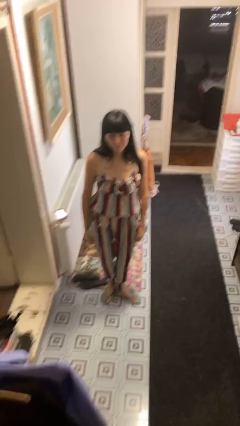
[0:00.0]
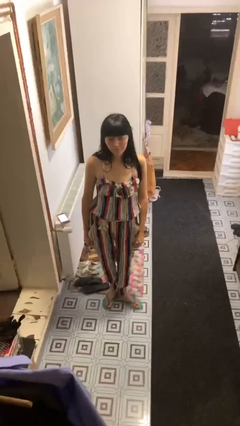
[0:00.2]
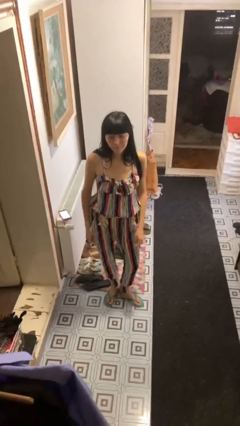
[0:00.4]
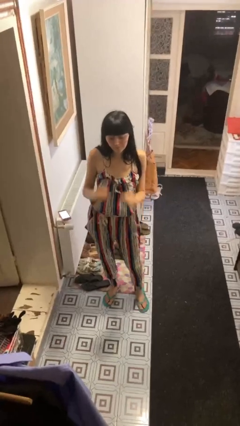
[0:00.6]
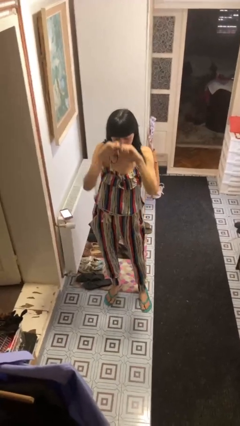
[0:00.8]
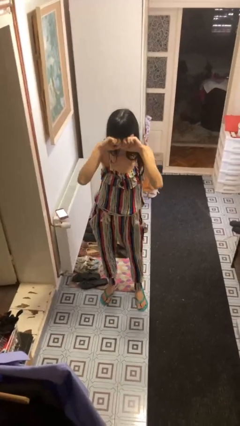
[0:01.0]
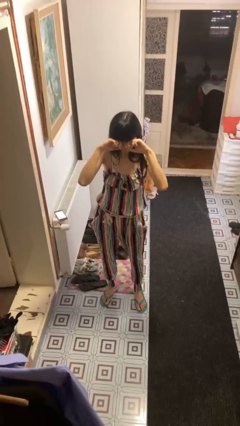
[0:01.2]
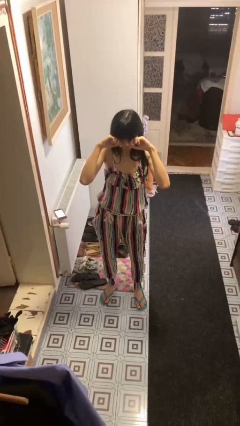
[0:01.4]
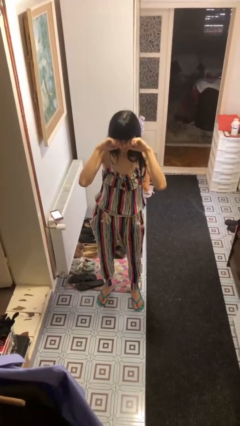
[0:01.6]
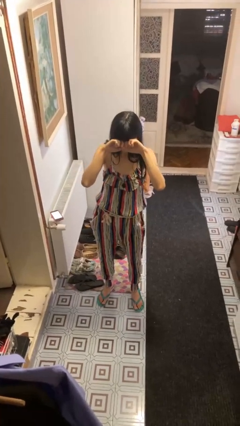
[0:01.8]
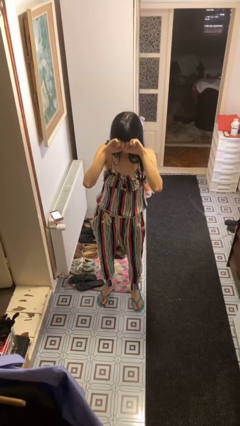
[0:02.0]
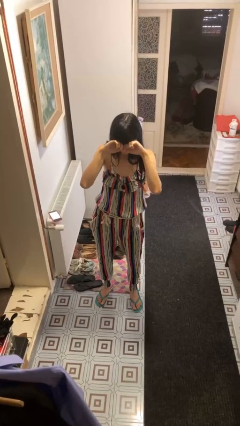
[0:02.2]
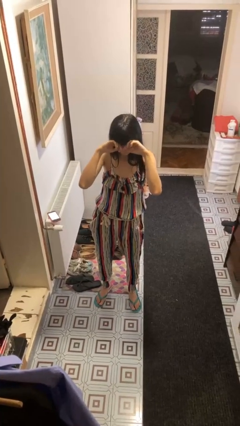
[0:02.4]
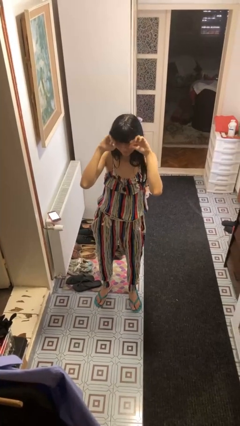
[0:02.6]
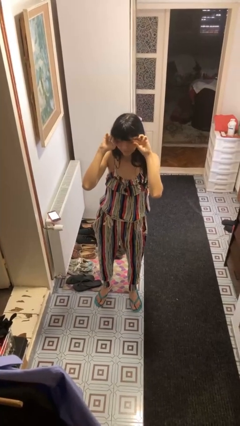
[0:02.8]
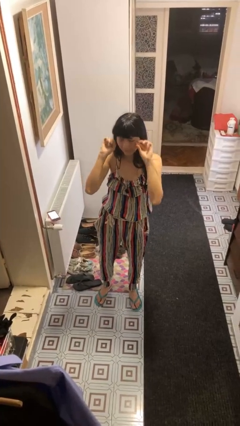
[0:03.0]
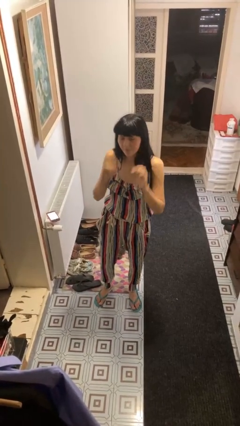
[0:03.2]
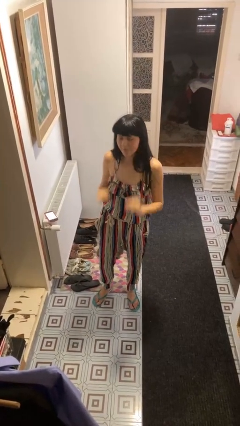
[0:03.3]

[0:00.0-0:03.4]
person rubs eyes

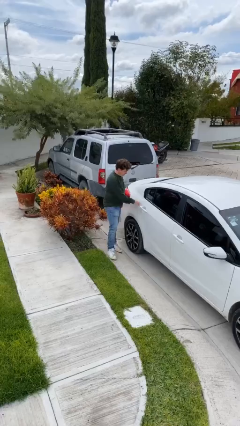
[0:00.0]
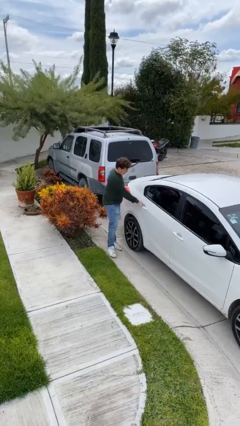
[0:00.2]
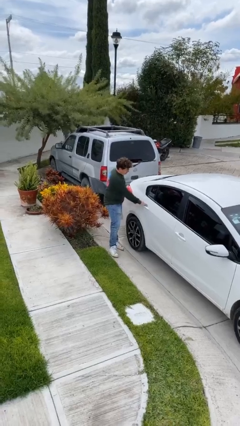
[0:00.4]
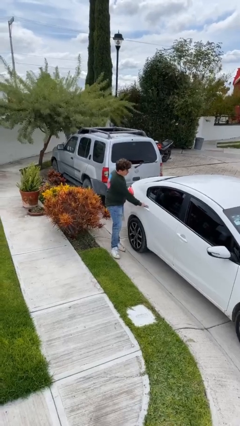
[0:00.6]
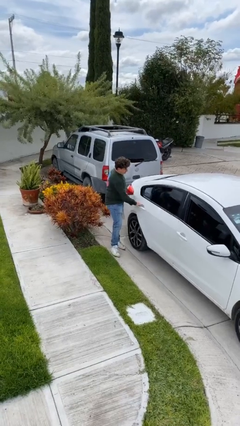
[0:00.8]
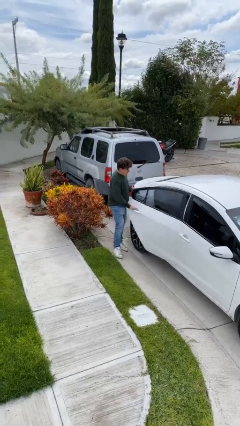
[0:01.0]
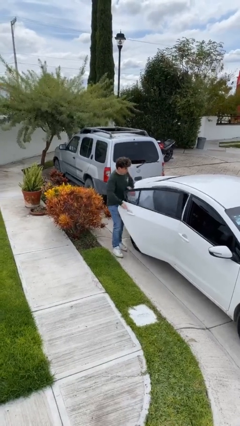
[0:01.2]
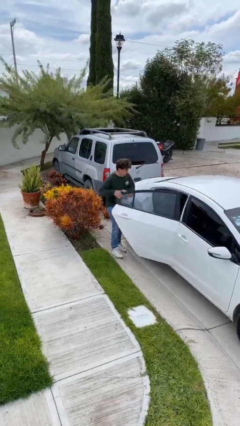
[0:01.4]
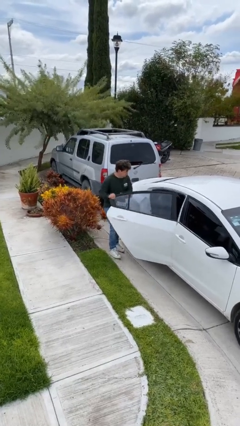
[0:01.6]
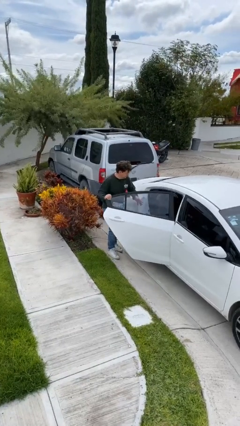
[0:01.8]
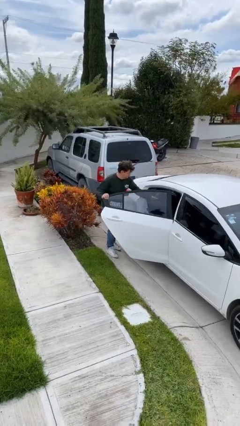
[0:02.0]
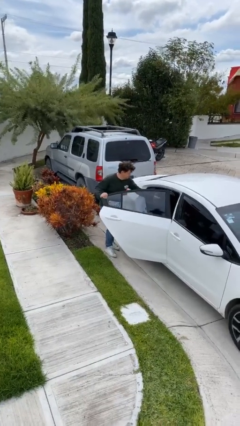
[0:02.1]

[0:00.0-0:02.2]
person opens car door

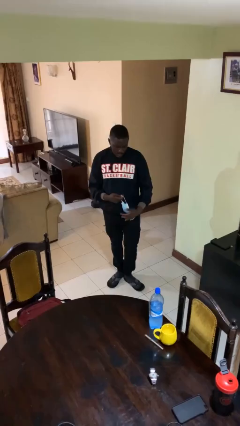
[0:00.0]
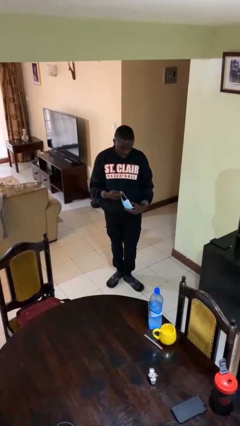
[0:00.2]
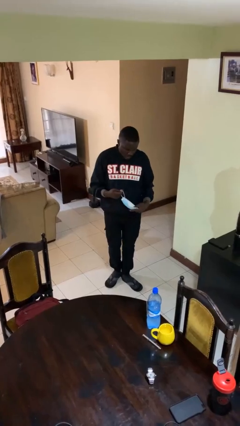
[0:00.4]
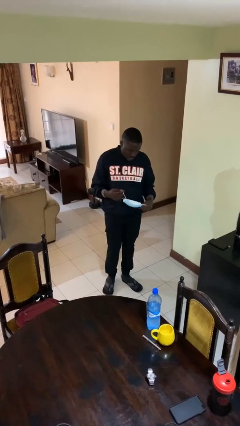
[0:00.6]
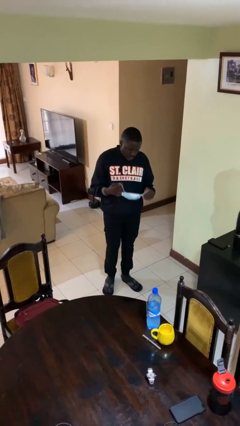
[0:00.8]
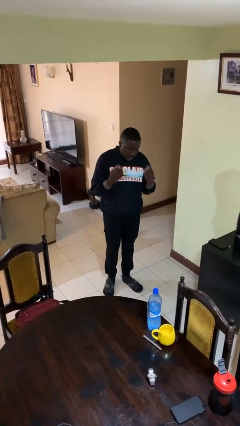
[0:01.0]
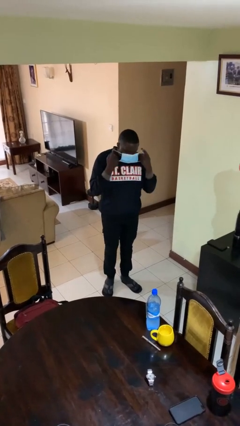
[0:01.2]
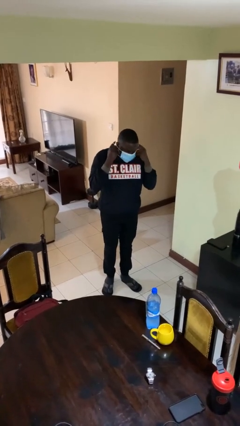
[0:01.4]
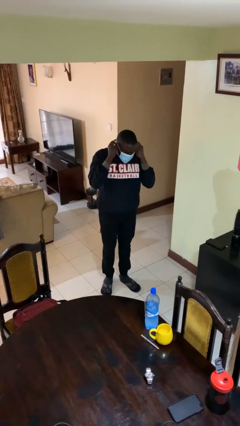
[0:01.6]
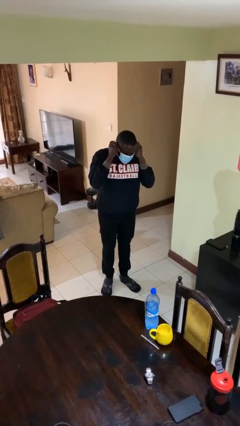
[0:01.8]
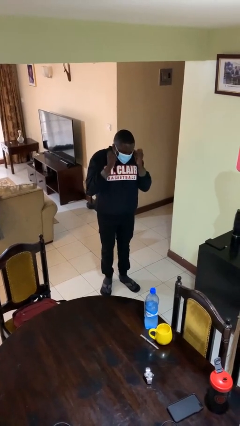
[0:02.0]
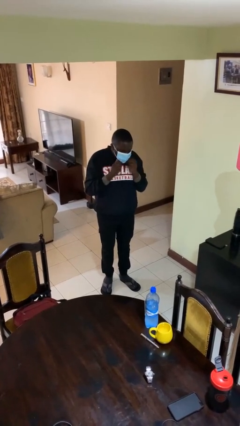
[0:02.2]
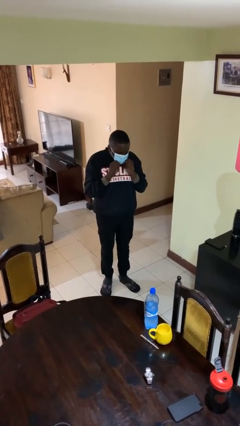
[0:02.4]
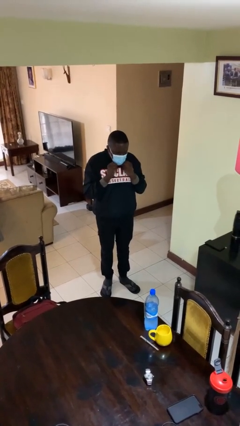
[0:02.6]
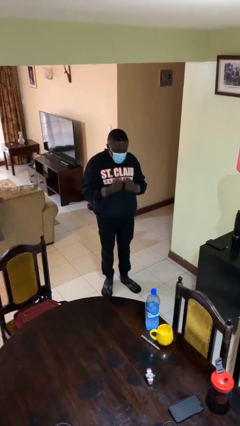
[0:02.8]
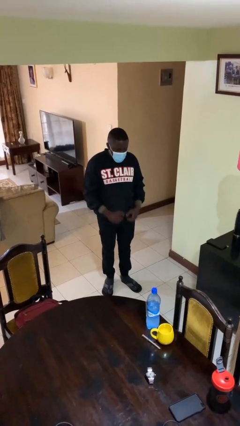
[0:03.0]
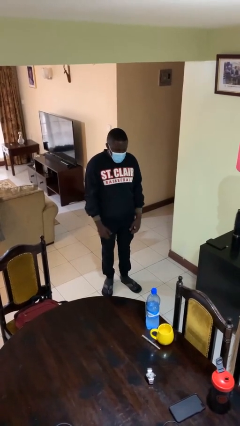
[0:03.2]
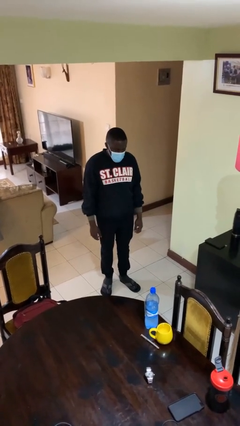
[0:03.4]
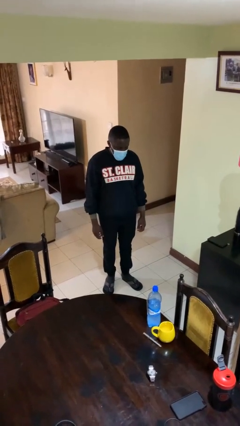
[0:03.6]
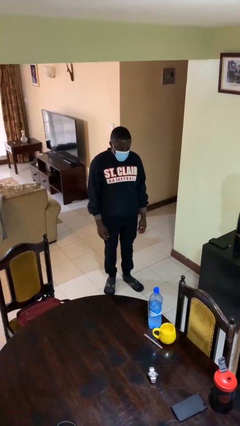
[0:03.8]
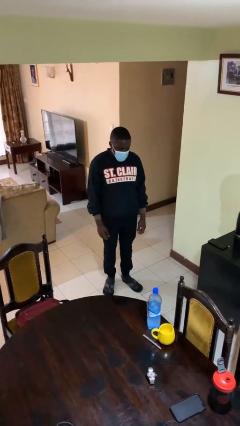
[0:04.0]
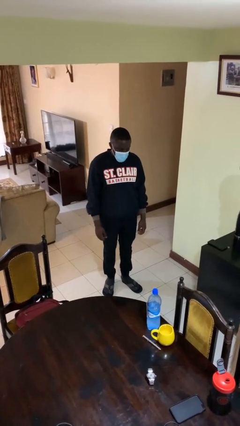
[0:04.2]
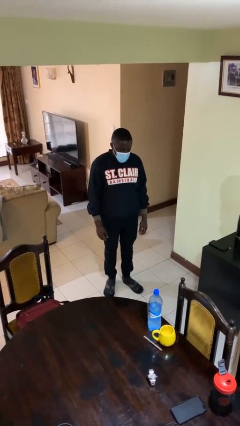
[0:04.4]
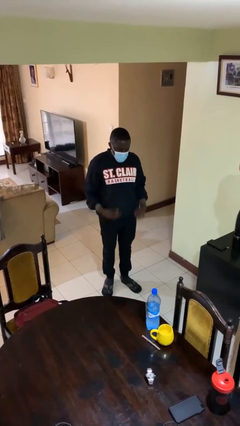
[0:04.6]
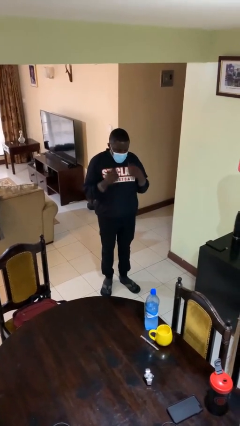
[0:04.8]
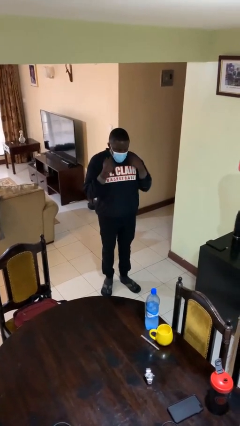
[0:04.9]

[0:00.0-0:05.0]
person puts on facemask

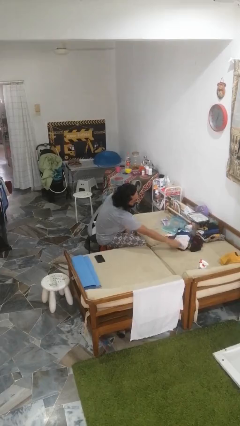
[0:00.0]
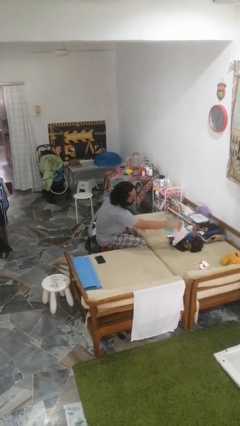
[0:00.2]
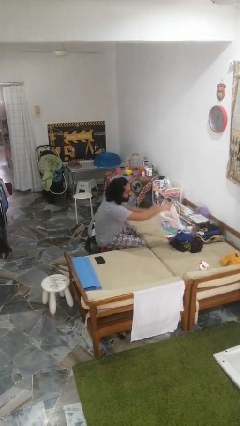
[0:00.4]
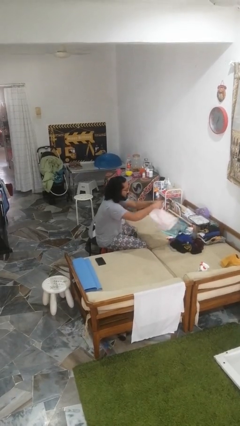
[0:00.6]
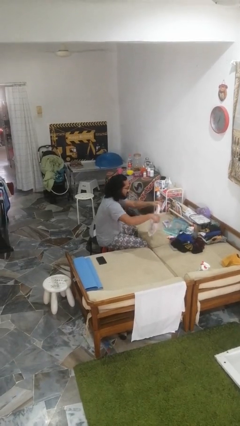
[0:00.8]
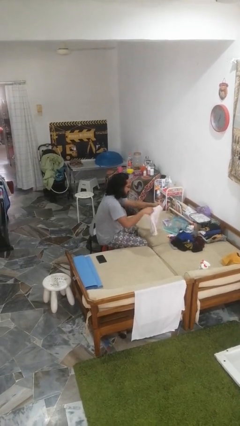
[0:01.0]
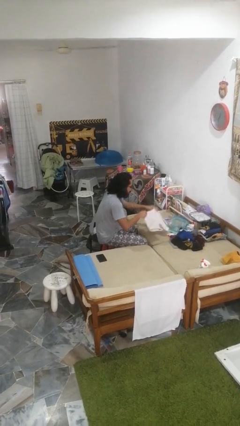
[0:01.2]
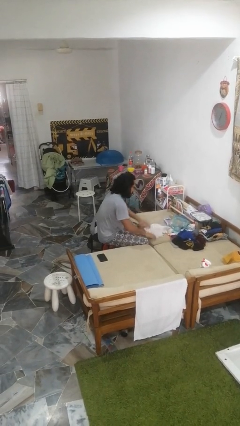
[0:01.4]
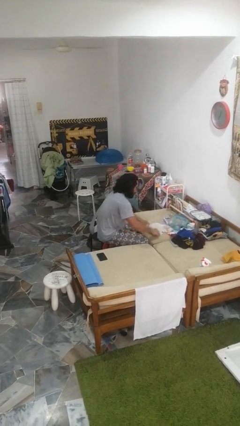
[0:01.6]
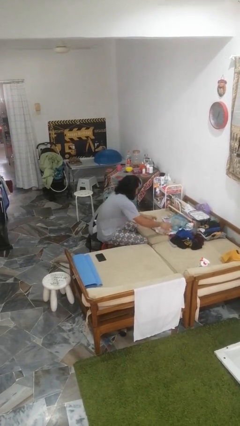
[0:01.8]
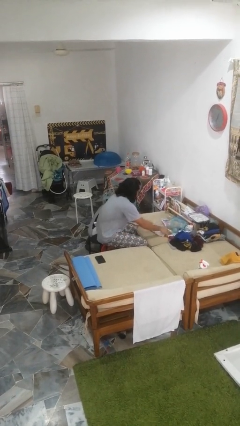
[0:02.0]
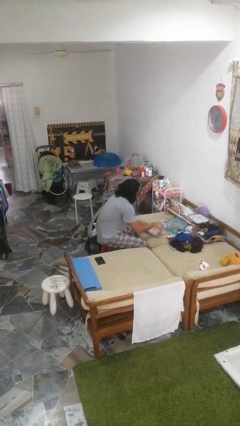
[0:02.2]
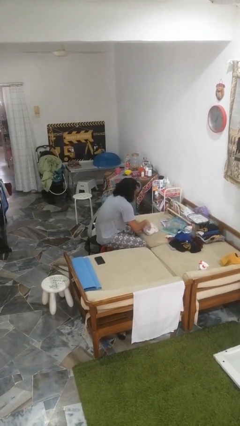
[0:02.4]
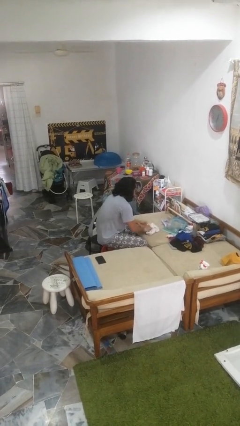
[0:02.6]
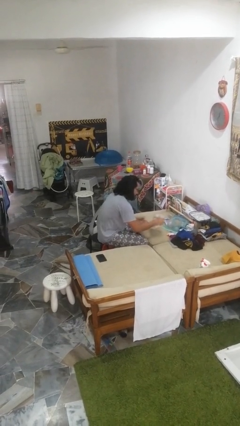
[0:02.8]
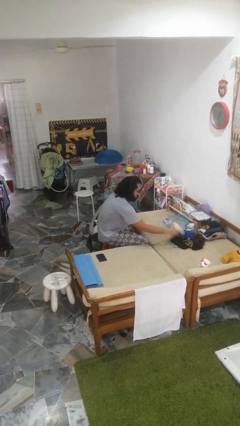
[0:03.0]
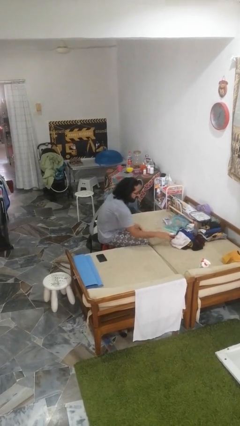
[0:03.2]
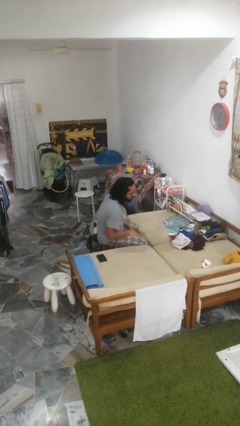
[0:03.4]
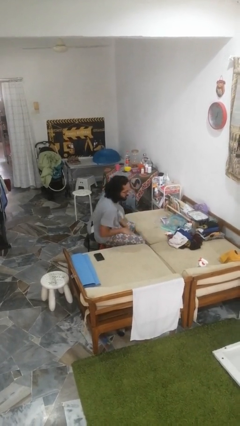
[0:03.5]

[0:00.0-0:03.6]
person folds pants

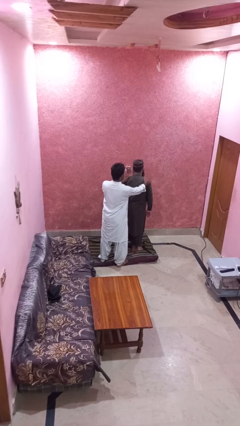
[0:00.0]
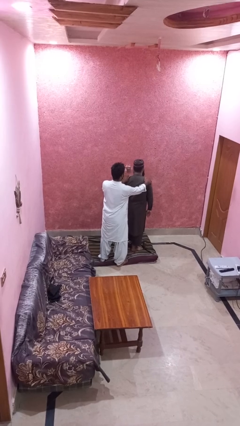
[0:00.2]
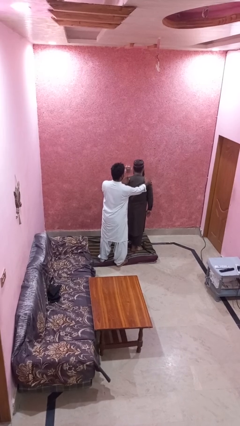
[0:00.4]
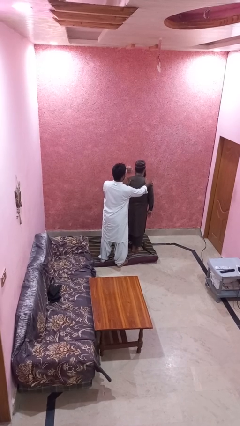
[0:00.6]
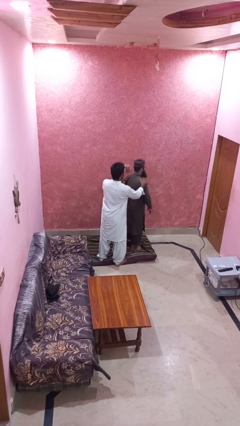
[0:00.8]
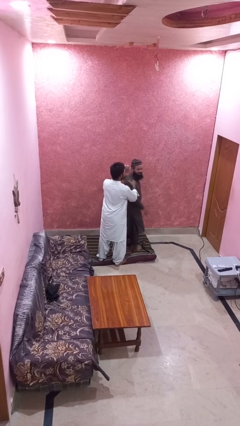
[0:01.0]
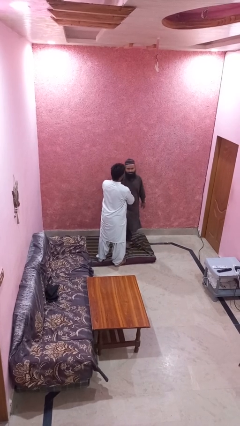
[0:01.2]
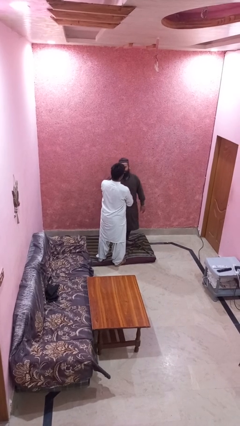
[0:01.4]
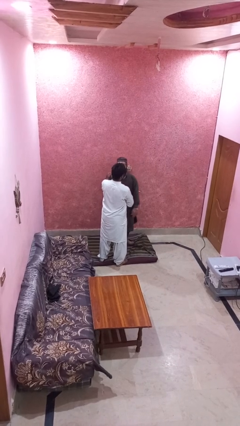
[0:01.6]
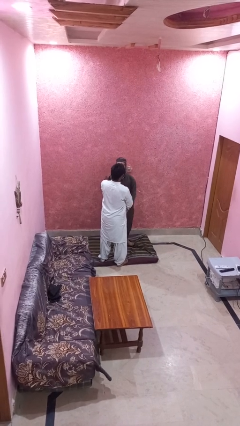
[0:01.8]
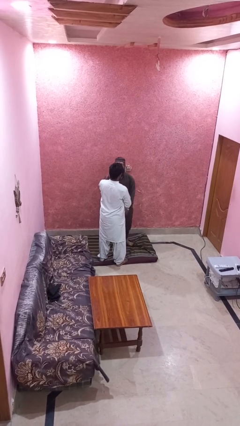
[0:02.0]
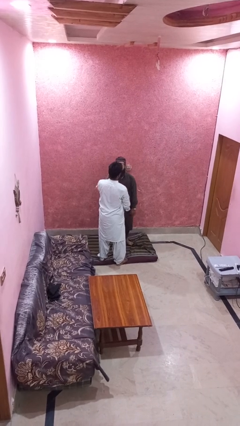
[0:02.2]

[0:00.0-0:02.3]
person spins person around

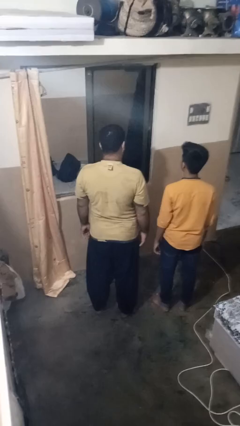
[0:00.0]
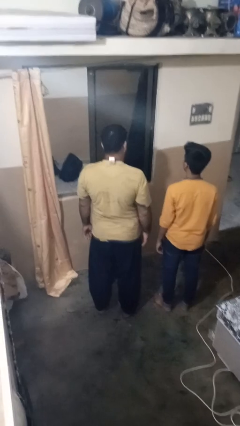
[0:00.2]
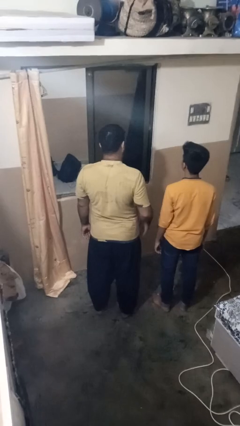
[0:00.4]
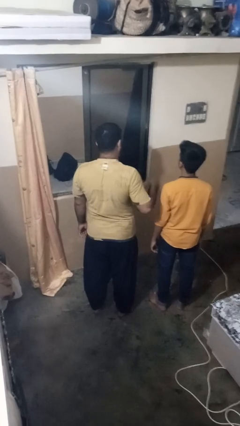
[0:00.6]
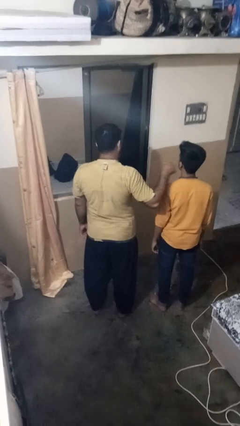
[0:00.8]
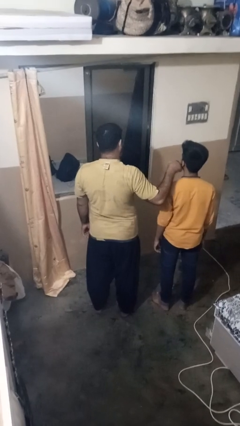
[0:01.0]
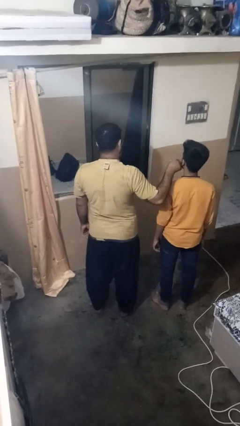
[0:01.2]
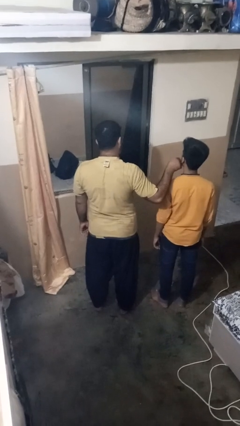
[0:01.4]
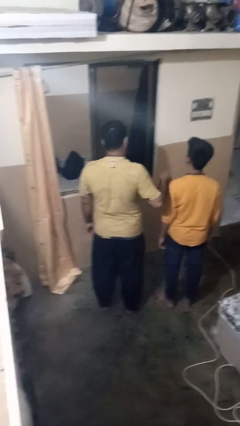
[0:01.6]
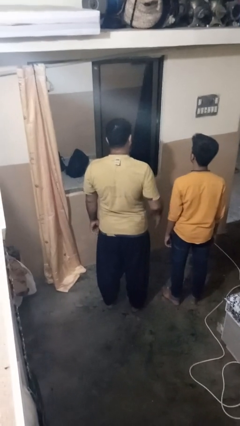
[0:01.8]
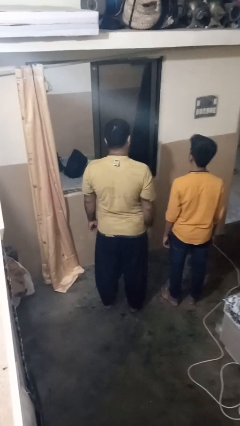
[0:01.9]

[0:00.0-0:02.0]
person touches face of person
